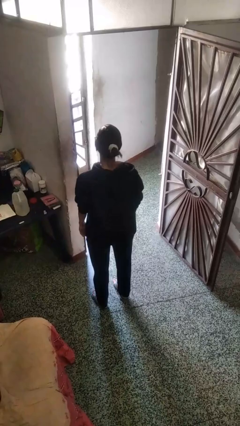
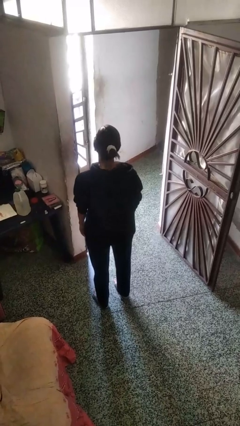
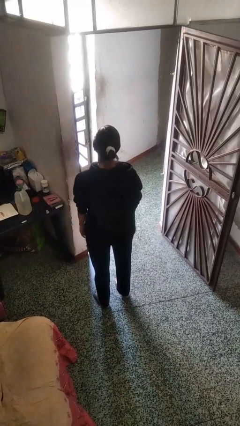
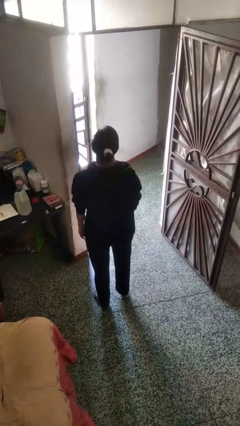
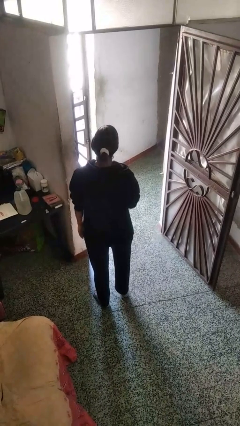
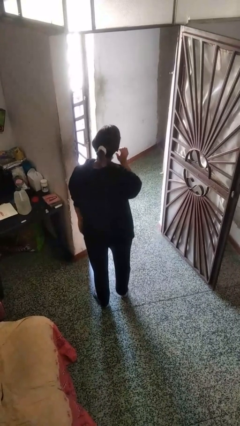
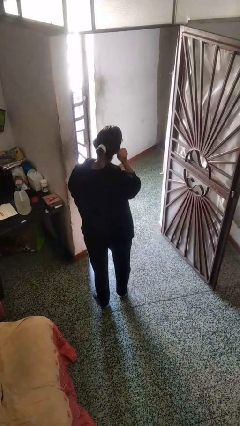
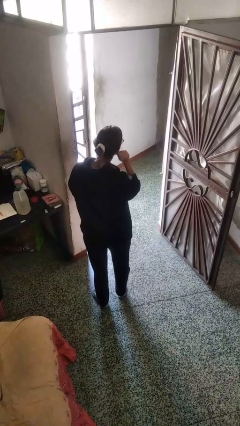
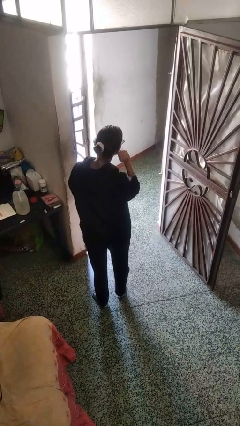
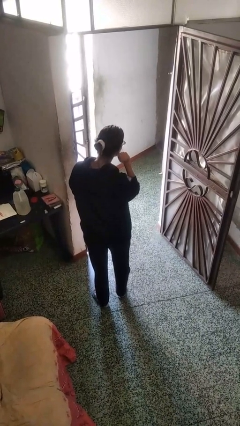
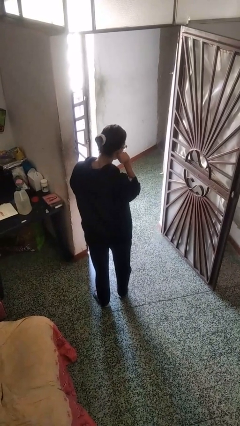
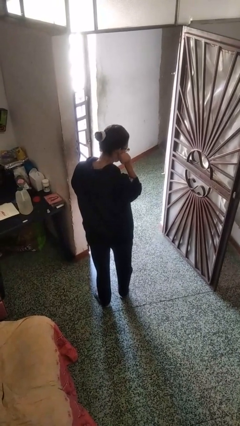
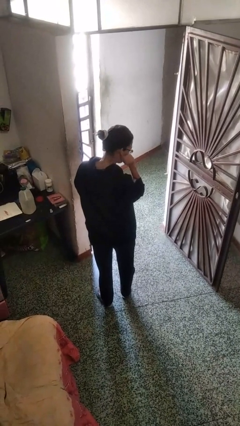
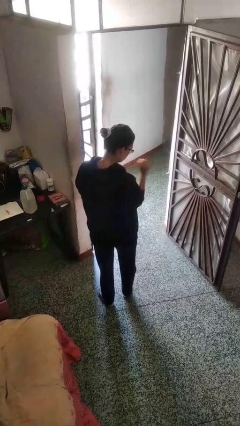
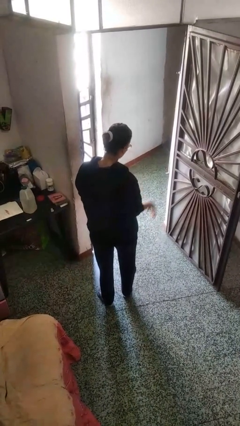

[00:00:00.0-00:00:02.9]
person touches earlobe

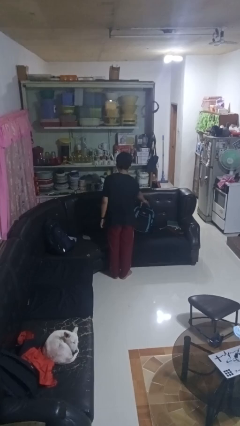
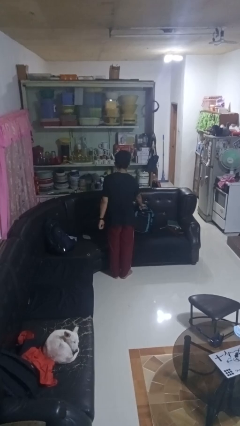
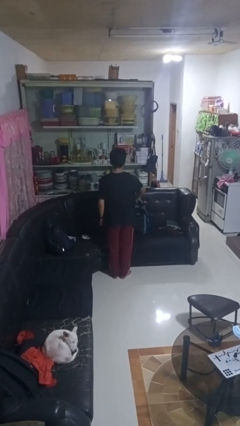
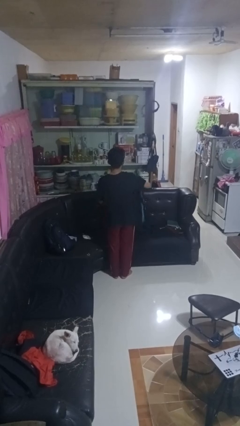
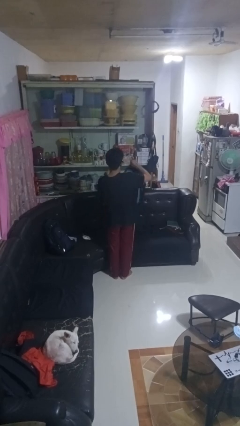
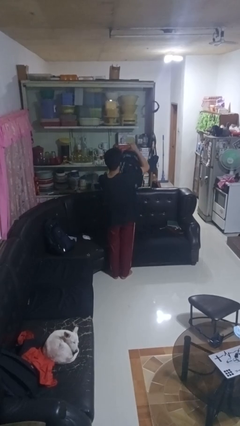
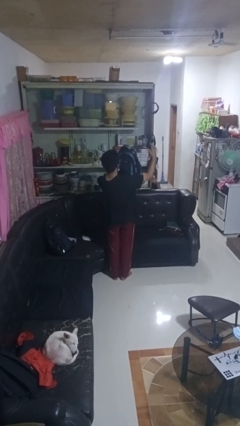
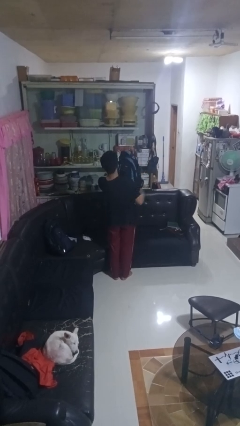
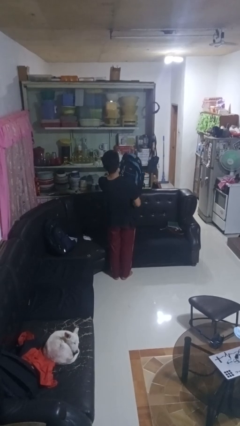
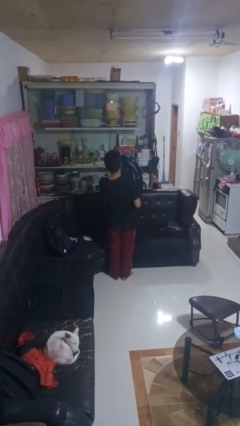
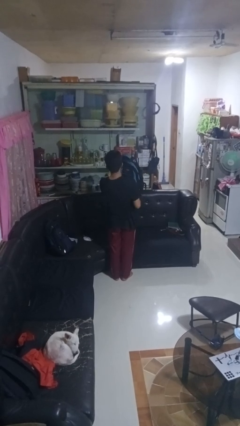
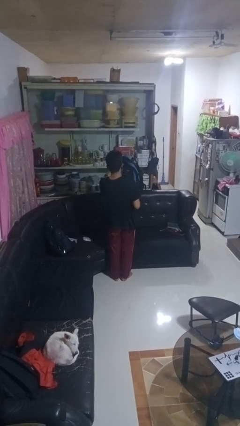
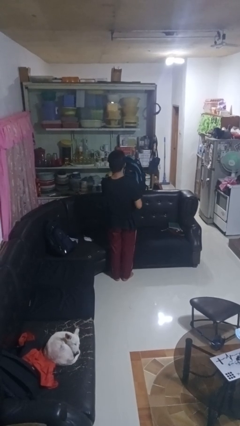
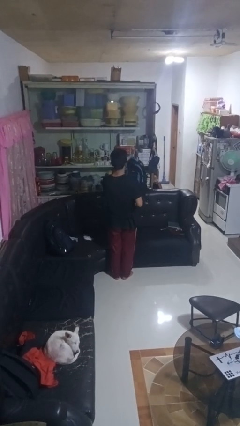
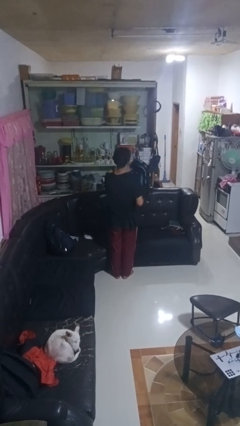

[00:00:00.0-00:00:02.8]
person picks up object from couch

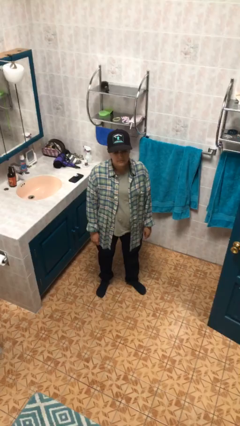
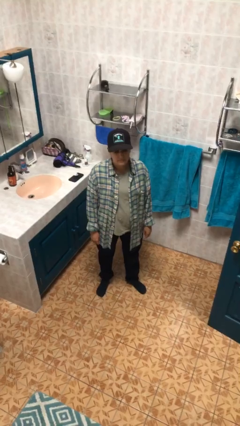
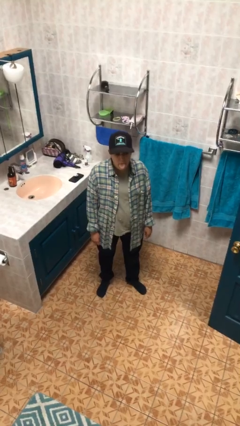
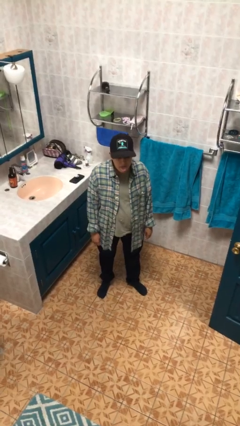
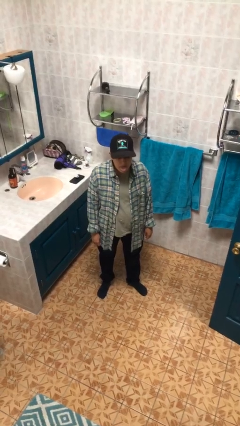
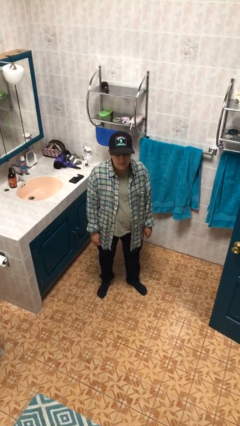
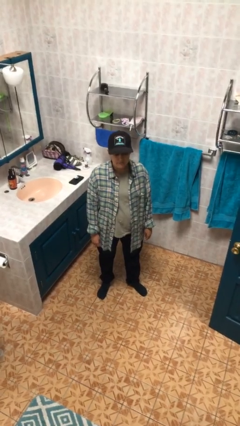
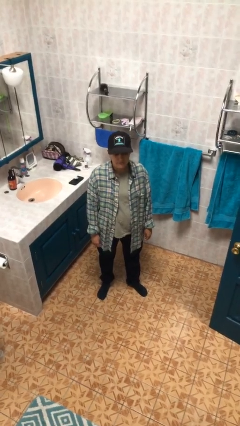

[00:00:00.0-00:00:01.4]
person sticks out tongue

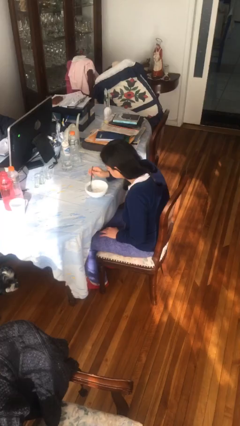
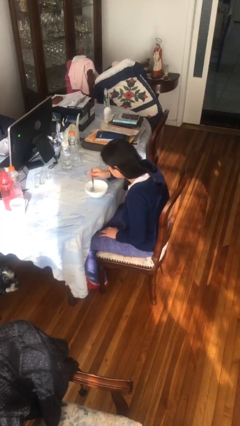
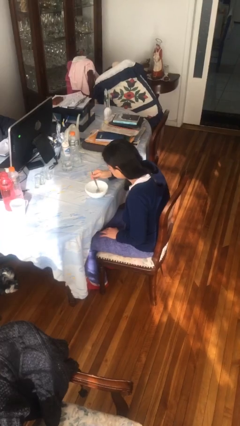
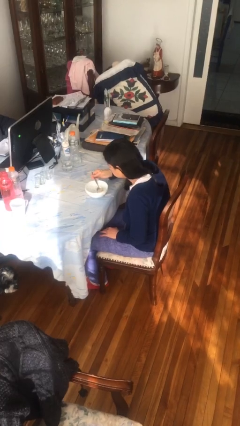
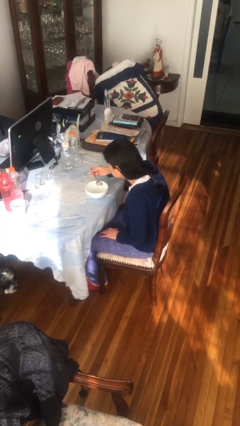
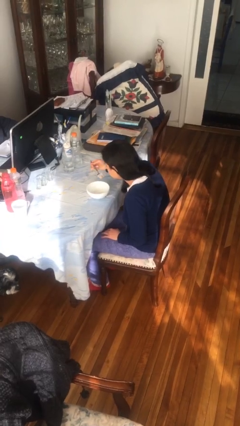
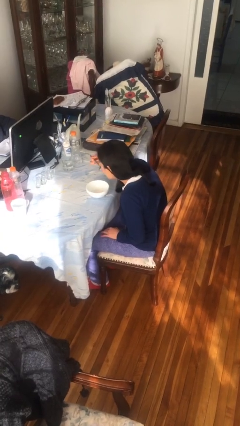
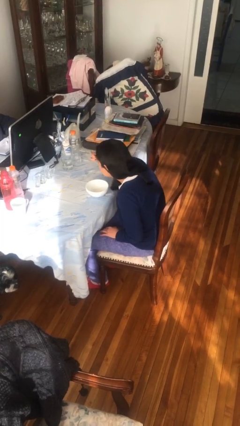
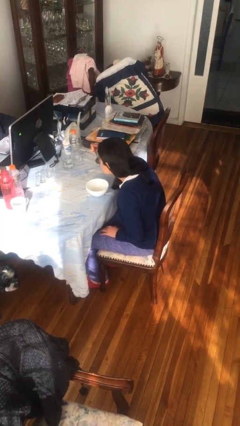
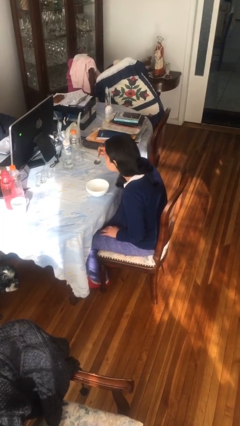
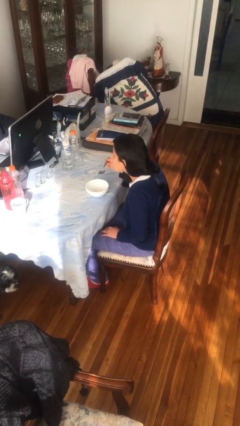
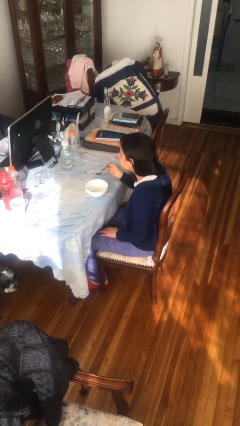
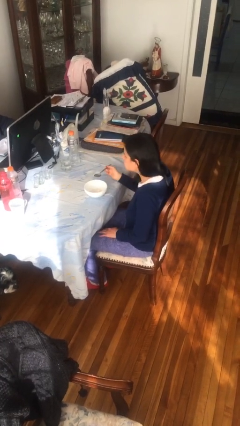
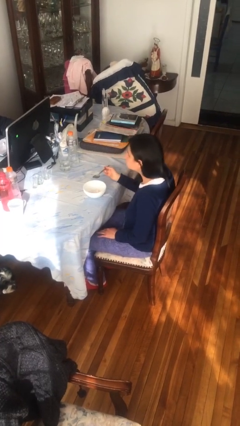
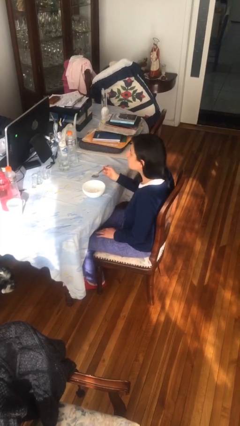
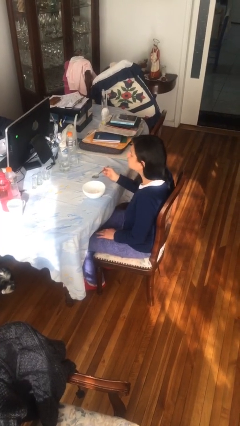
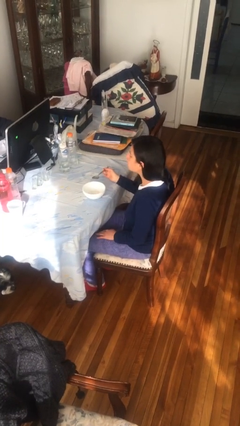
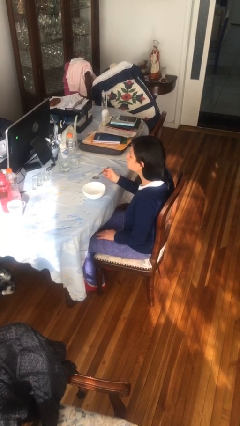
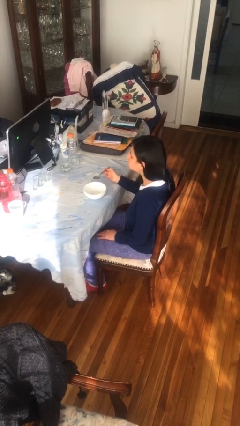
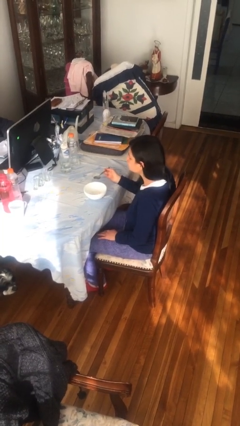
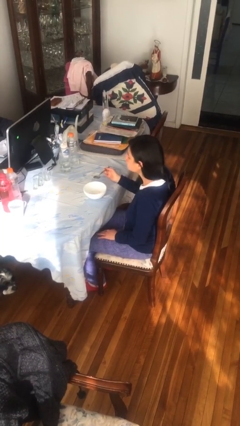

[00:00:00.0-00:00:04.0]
person eats with utensil

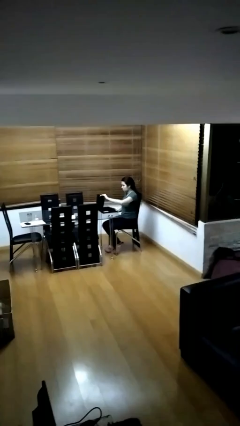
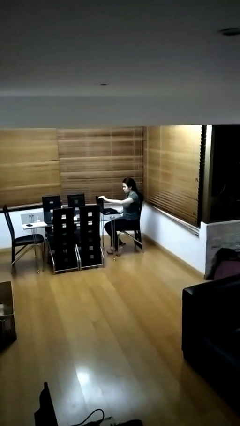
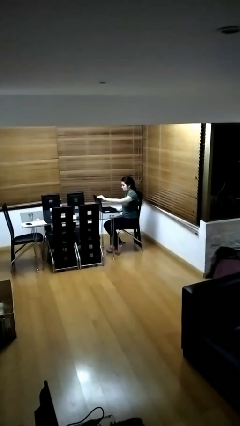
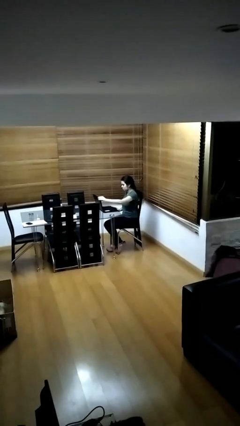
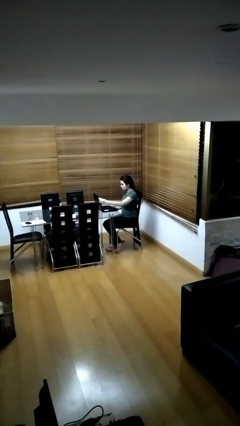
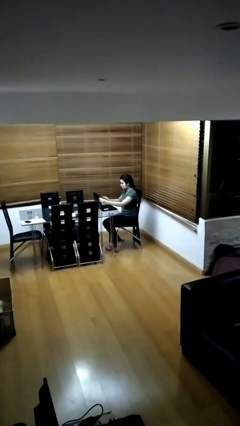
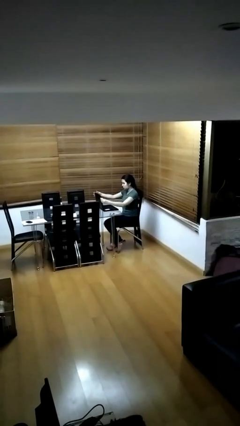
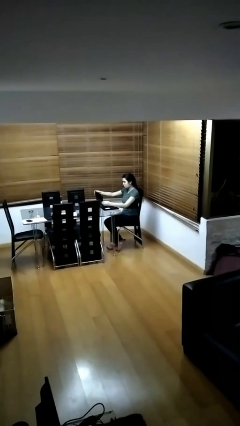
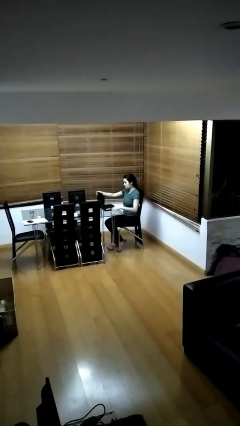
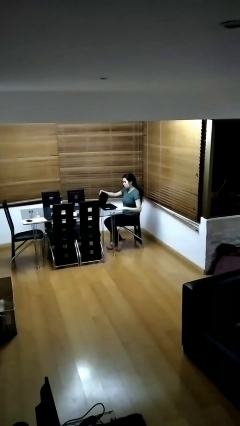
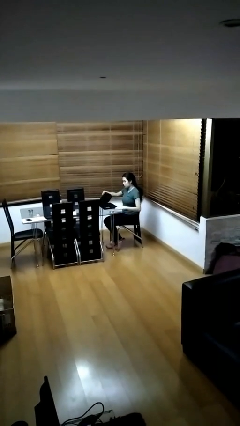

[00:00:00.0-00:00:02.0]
person interacts with laptop

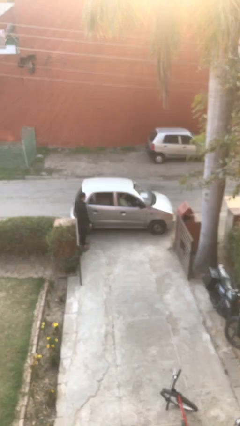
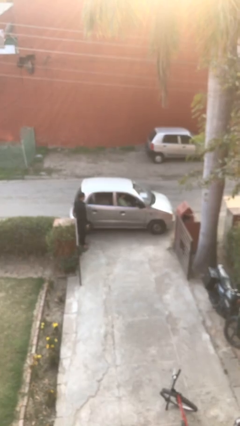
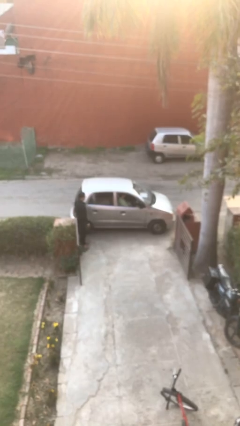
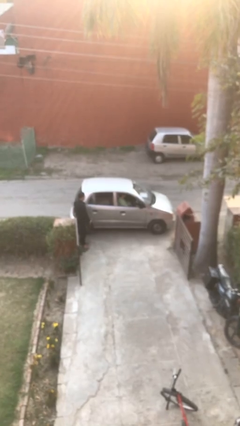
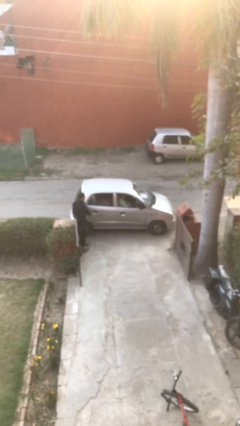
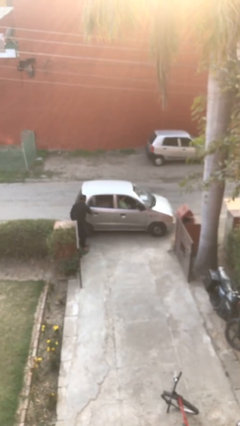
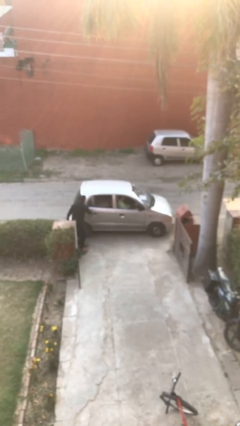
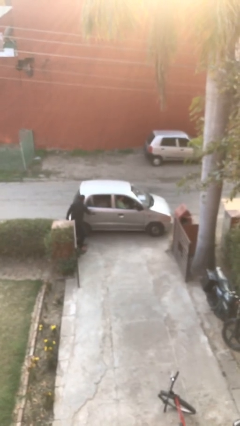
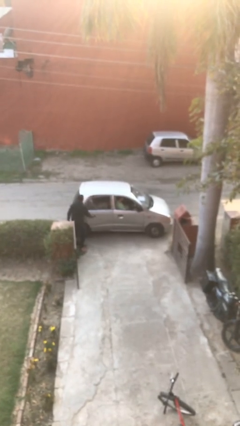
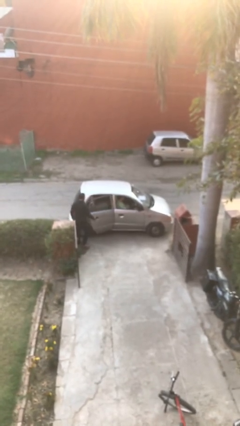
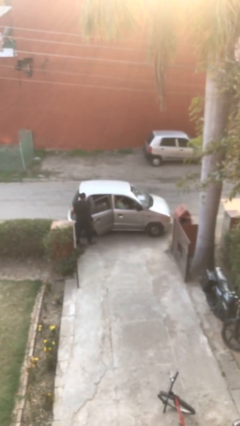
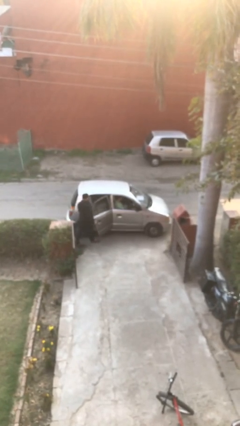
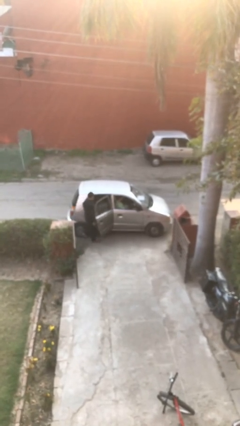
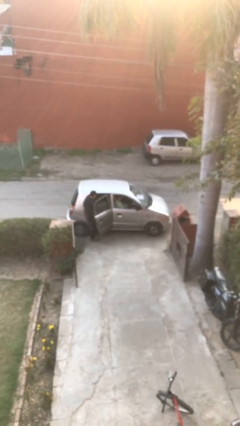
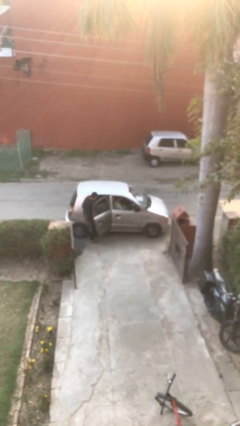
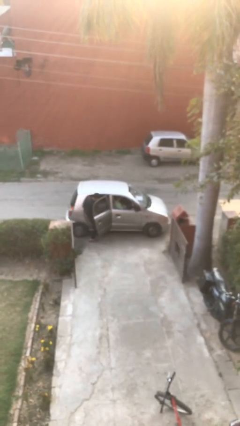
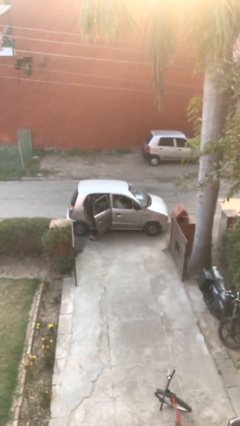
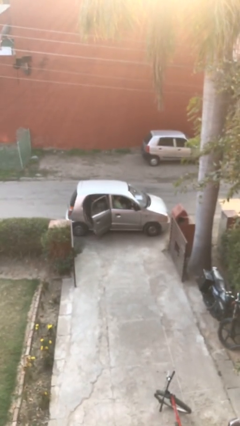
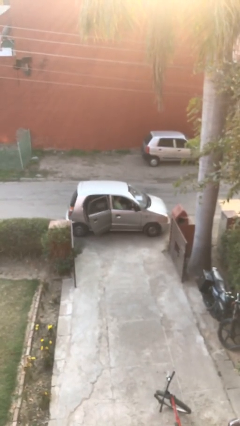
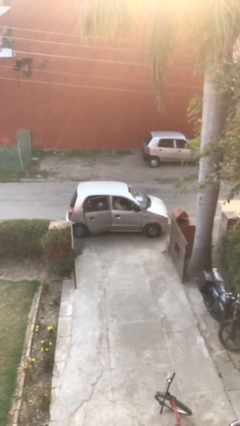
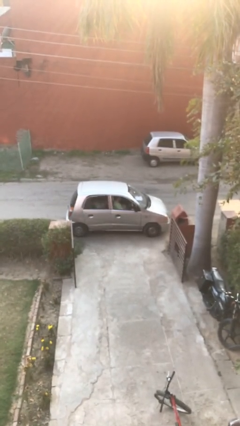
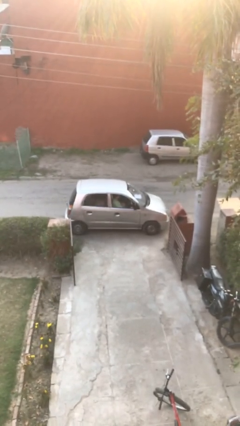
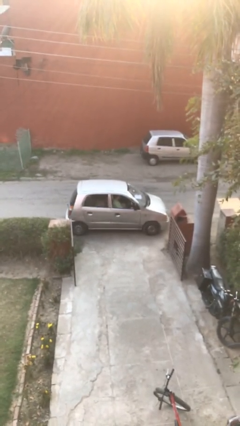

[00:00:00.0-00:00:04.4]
car picks up person
